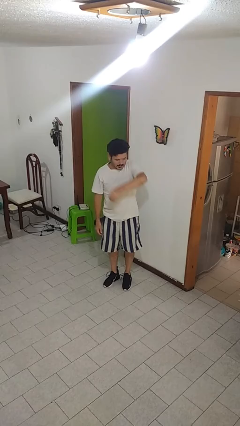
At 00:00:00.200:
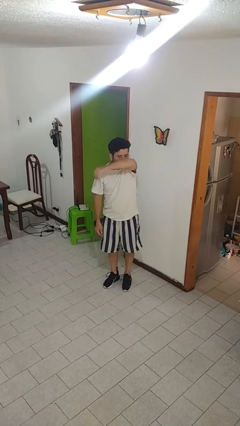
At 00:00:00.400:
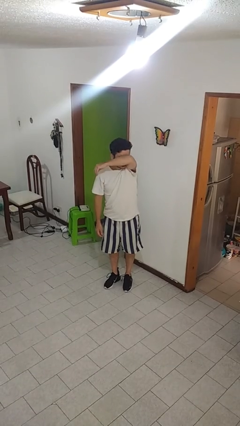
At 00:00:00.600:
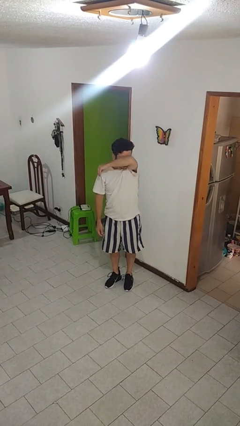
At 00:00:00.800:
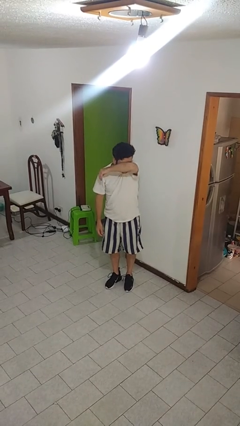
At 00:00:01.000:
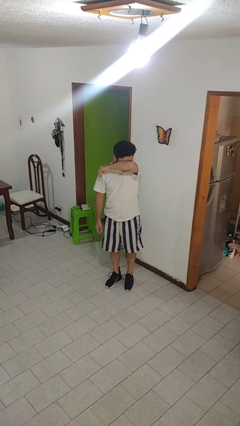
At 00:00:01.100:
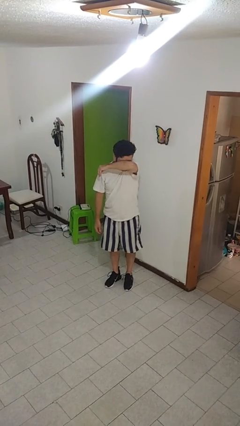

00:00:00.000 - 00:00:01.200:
person sneezes into arm

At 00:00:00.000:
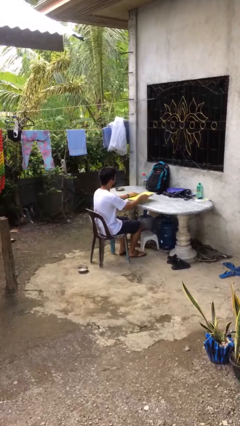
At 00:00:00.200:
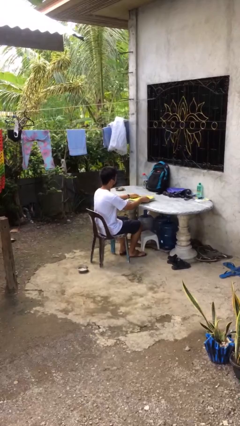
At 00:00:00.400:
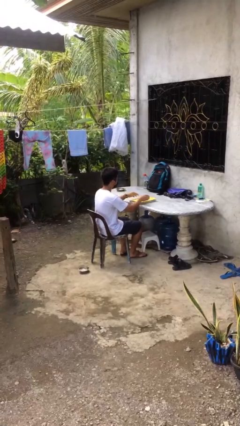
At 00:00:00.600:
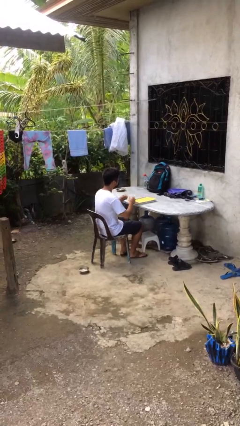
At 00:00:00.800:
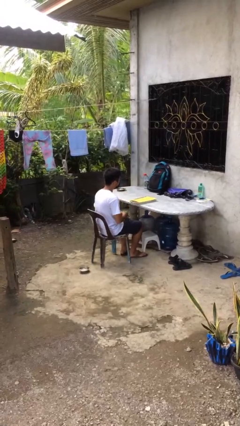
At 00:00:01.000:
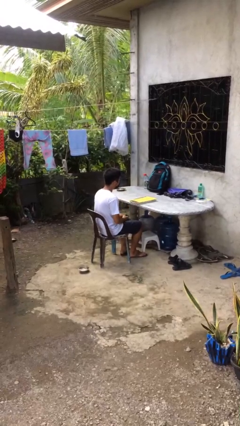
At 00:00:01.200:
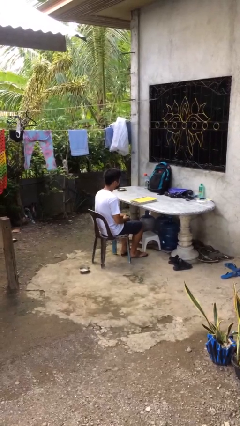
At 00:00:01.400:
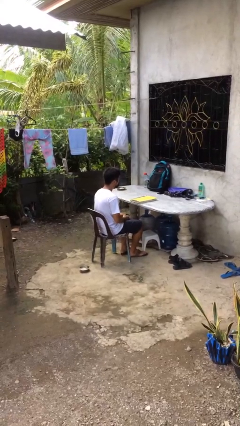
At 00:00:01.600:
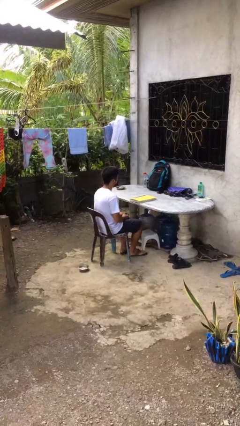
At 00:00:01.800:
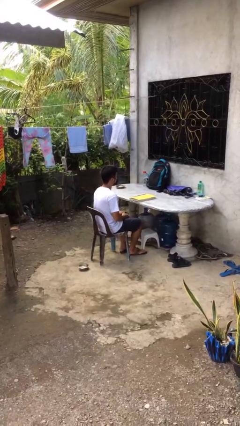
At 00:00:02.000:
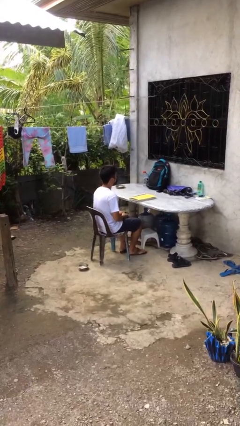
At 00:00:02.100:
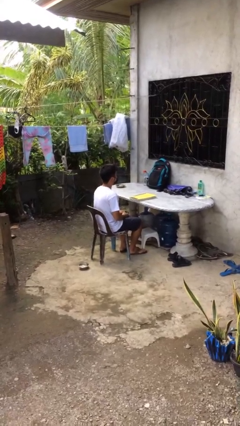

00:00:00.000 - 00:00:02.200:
person puts down object on table

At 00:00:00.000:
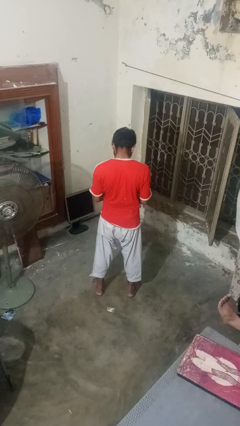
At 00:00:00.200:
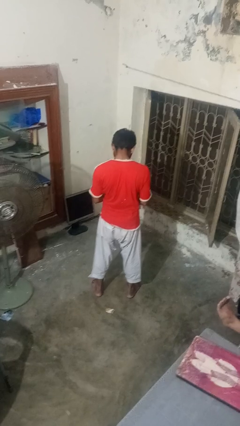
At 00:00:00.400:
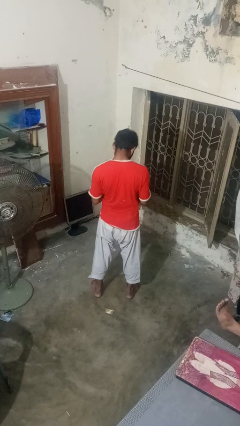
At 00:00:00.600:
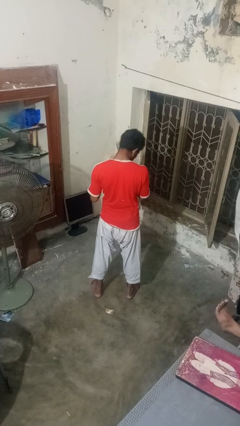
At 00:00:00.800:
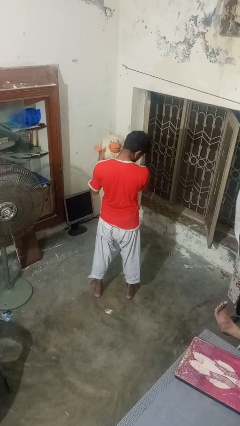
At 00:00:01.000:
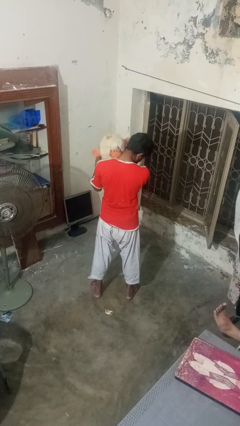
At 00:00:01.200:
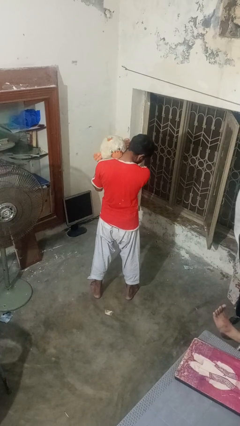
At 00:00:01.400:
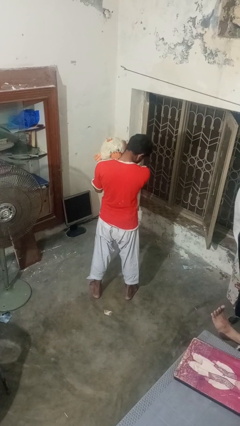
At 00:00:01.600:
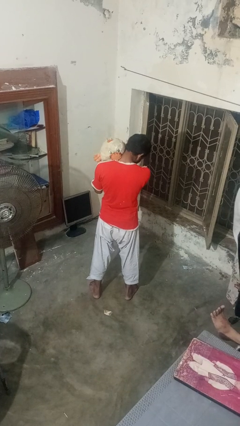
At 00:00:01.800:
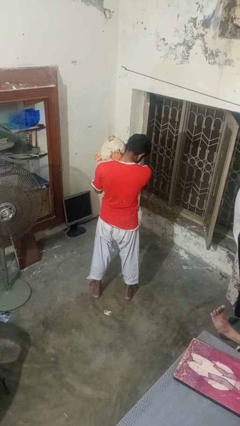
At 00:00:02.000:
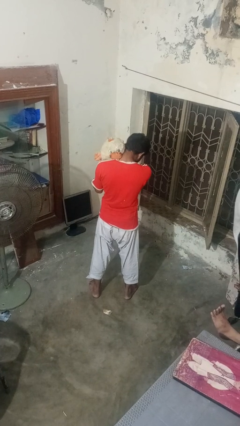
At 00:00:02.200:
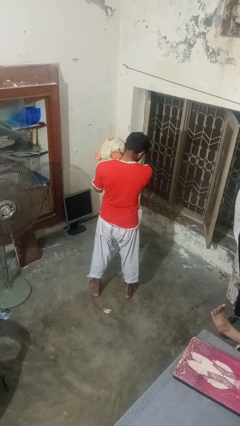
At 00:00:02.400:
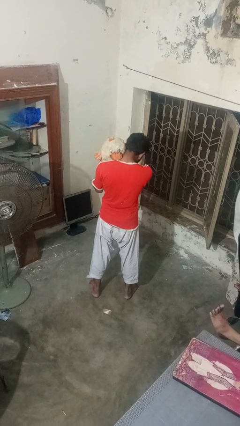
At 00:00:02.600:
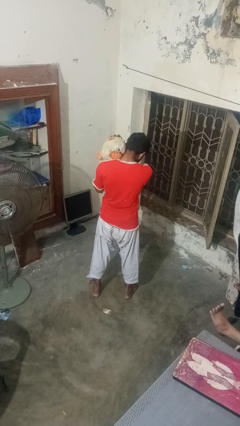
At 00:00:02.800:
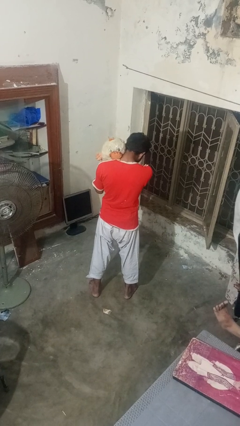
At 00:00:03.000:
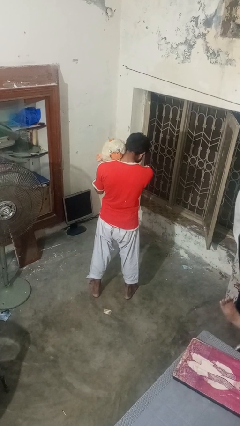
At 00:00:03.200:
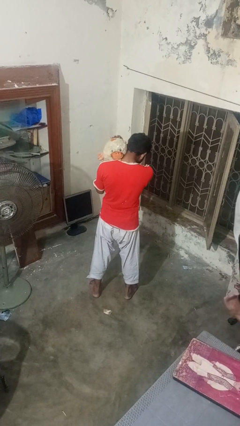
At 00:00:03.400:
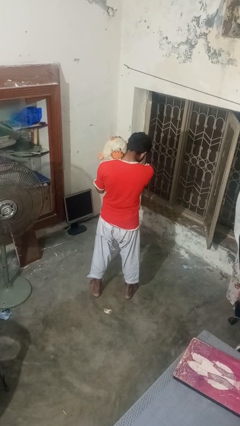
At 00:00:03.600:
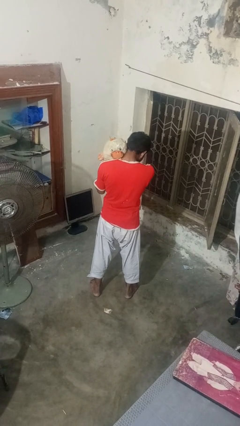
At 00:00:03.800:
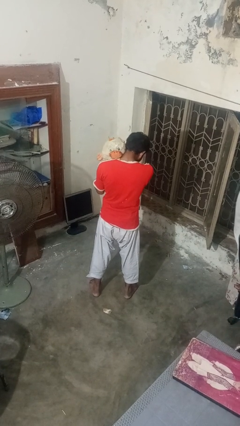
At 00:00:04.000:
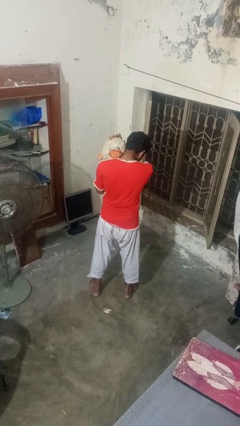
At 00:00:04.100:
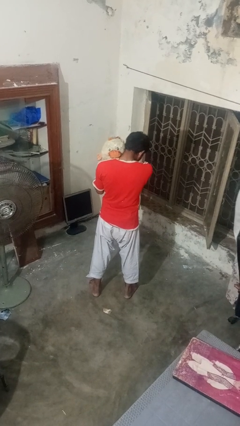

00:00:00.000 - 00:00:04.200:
person hugs stuffed animal

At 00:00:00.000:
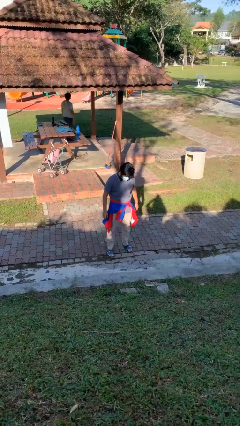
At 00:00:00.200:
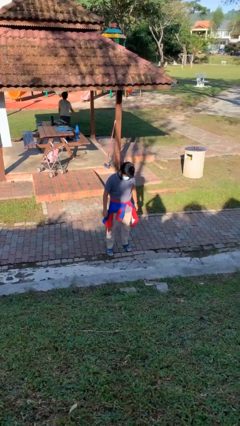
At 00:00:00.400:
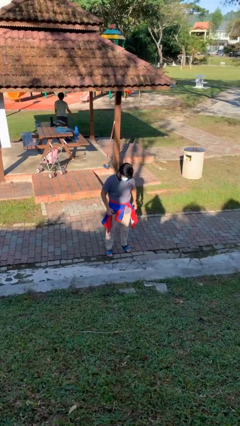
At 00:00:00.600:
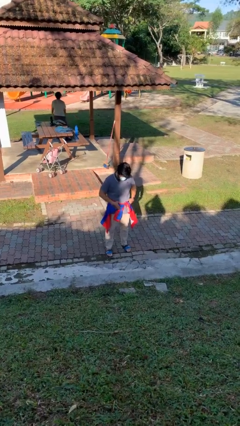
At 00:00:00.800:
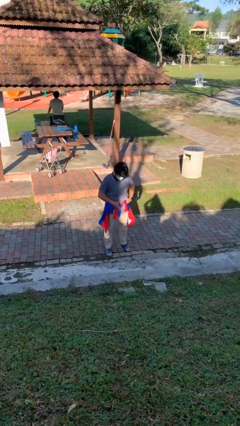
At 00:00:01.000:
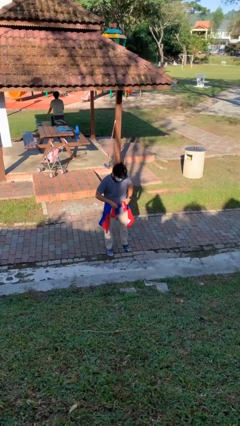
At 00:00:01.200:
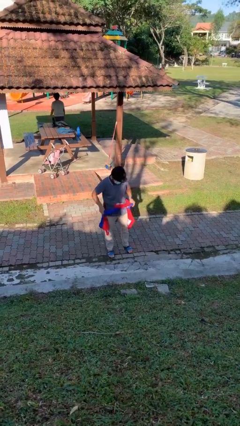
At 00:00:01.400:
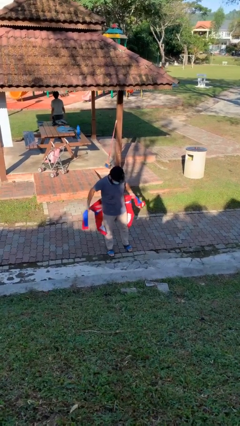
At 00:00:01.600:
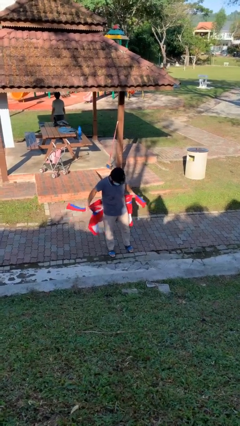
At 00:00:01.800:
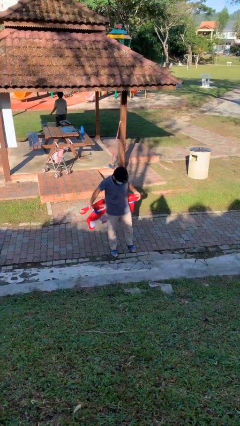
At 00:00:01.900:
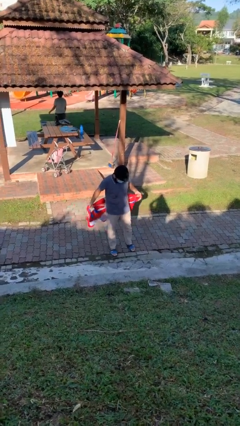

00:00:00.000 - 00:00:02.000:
person unties jacket around waist

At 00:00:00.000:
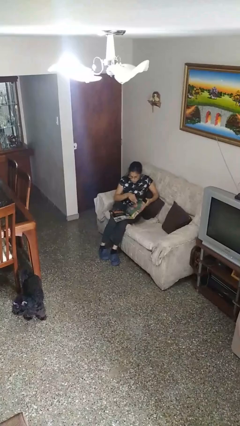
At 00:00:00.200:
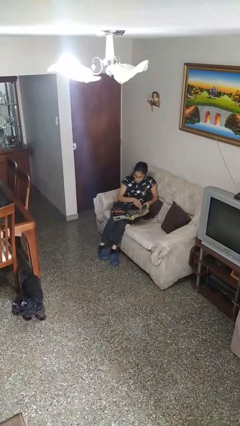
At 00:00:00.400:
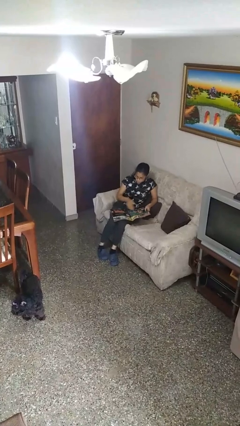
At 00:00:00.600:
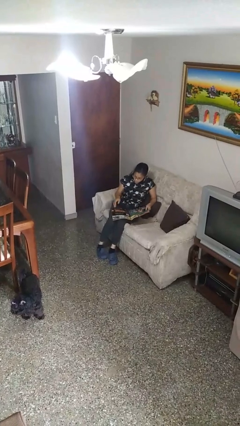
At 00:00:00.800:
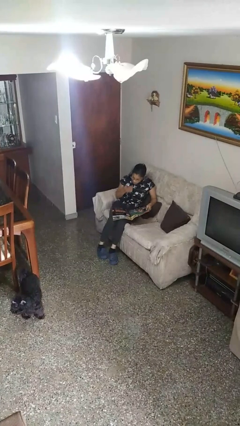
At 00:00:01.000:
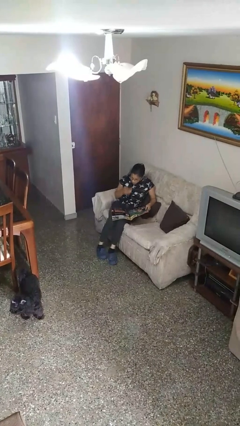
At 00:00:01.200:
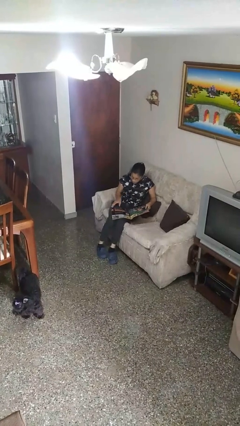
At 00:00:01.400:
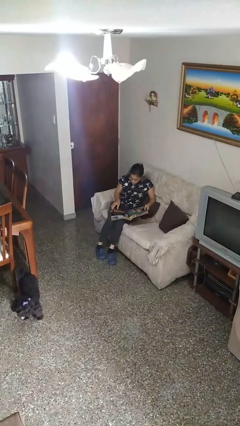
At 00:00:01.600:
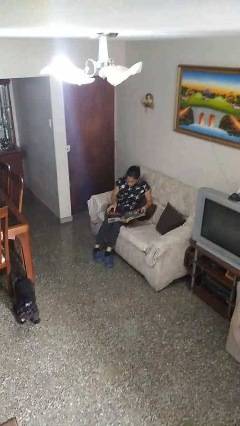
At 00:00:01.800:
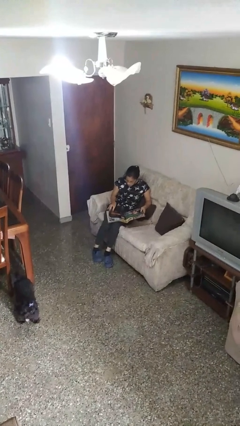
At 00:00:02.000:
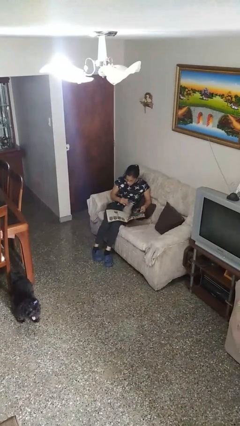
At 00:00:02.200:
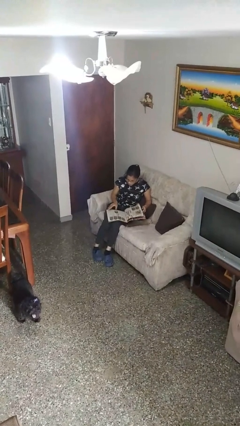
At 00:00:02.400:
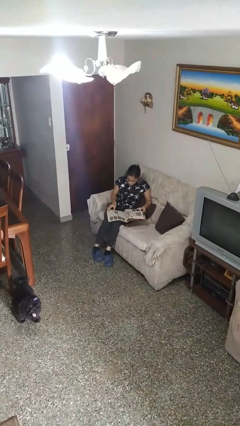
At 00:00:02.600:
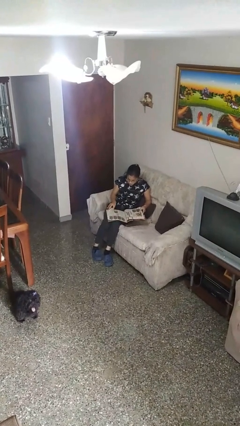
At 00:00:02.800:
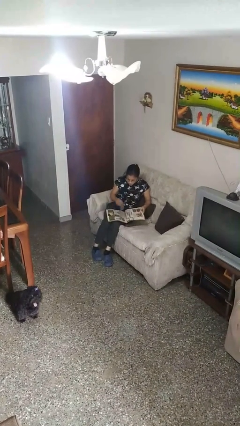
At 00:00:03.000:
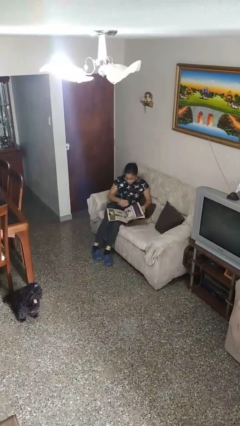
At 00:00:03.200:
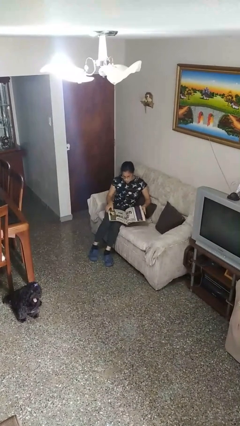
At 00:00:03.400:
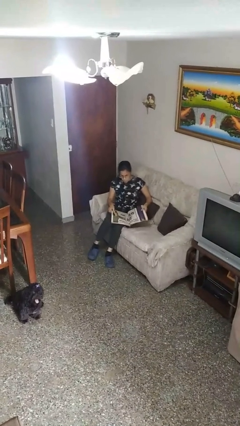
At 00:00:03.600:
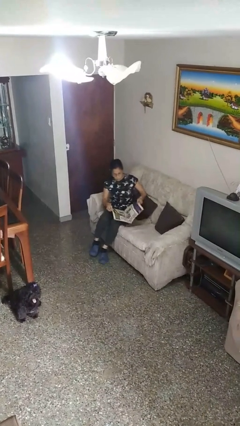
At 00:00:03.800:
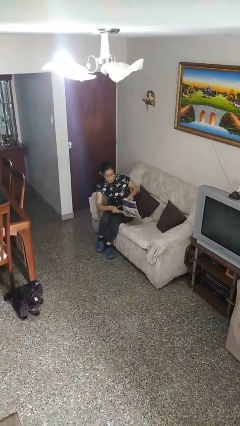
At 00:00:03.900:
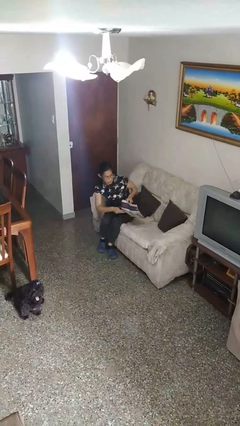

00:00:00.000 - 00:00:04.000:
person reads magazine

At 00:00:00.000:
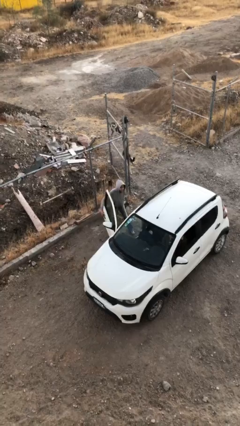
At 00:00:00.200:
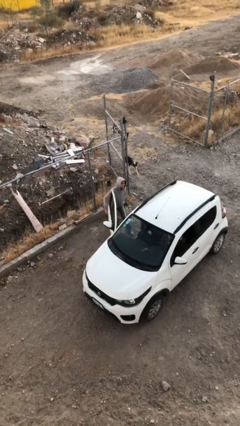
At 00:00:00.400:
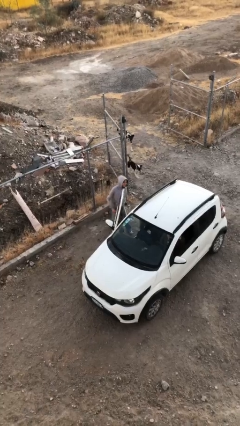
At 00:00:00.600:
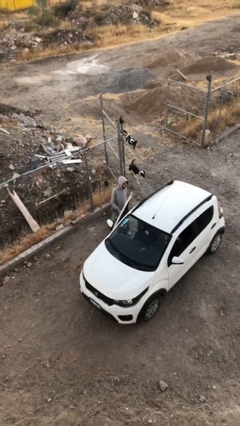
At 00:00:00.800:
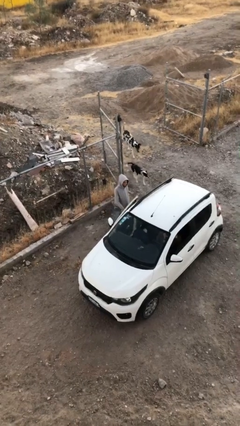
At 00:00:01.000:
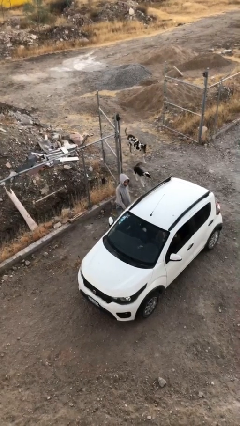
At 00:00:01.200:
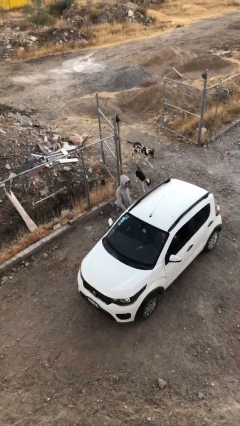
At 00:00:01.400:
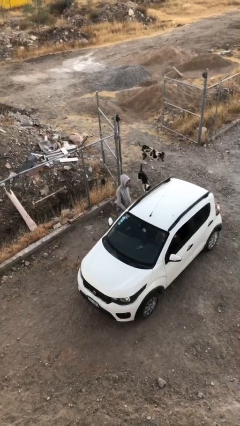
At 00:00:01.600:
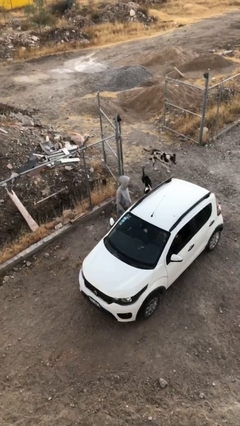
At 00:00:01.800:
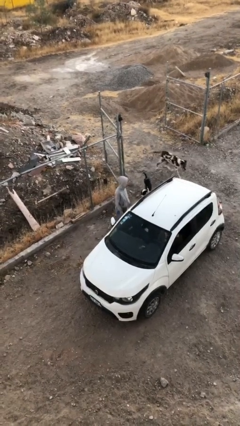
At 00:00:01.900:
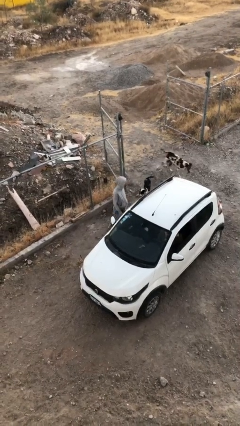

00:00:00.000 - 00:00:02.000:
person closes car door

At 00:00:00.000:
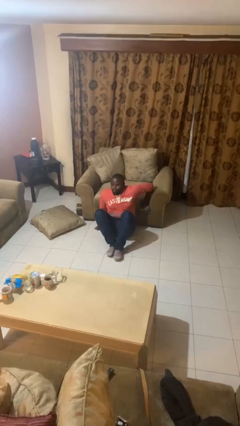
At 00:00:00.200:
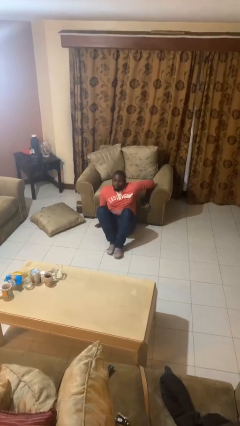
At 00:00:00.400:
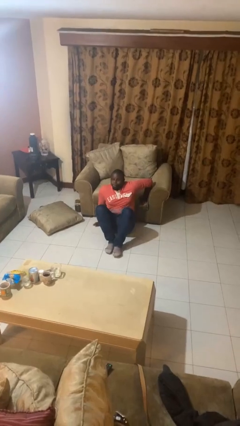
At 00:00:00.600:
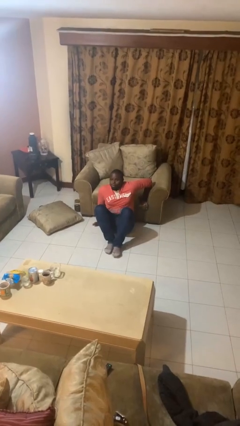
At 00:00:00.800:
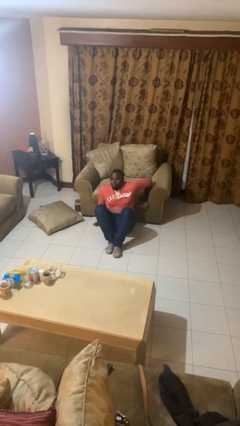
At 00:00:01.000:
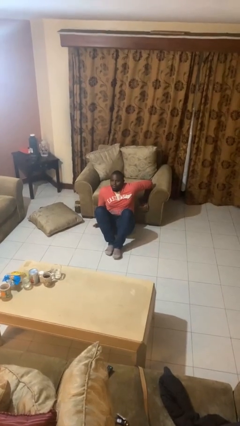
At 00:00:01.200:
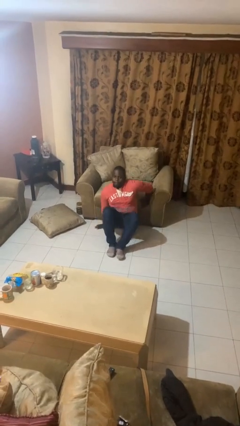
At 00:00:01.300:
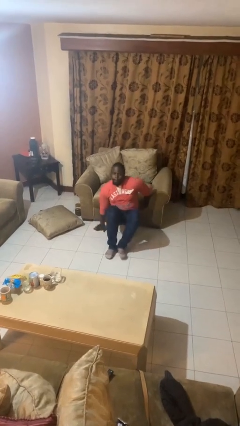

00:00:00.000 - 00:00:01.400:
person falls from chair
